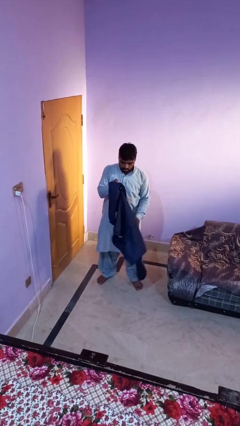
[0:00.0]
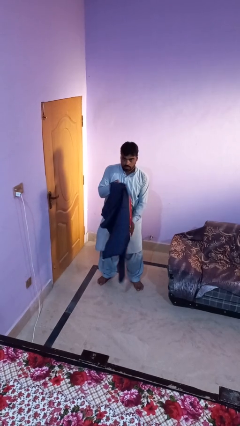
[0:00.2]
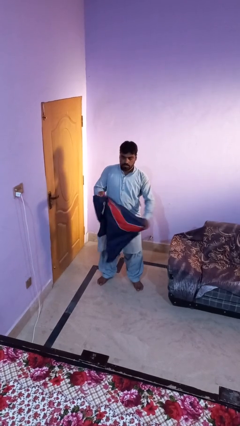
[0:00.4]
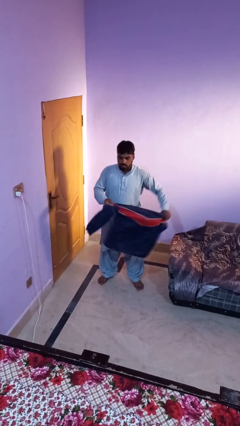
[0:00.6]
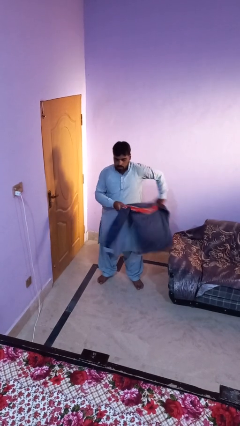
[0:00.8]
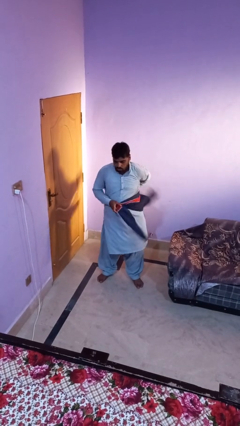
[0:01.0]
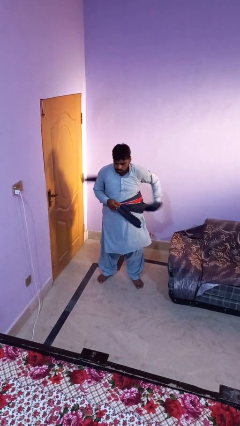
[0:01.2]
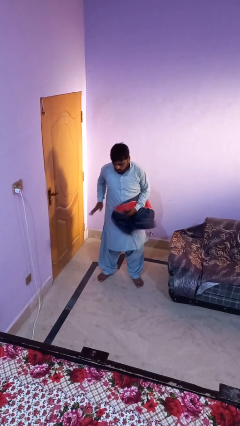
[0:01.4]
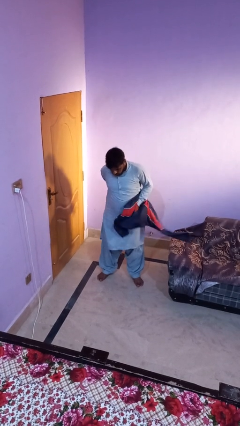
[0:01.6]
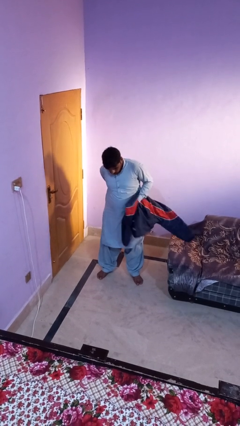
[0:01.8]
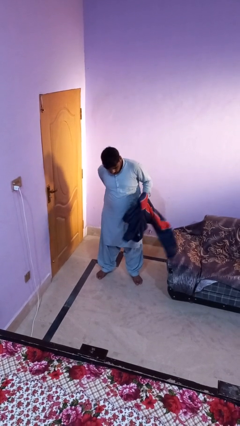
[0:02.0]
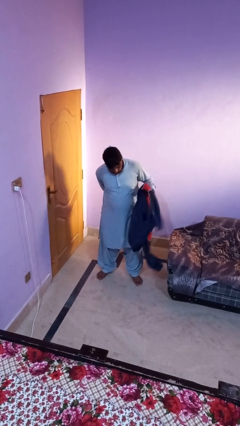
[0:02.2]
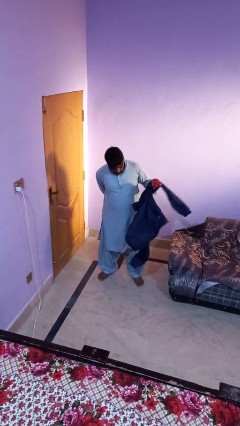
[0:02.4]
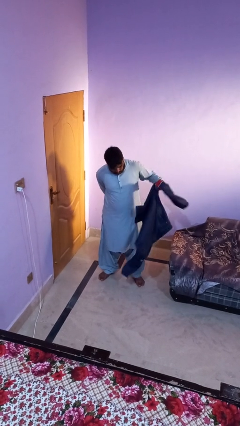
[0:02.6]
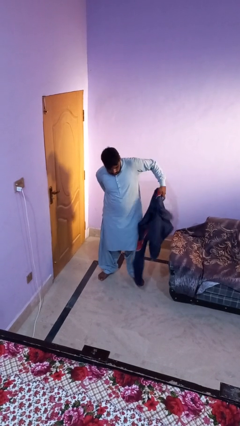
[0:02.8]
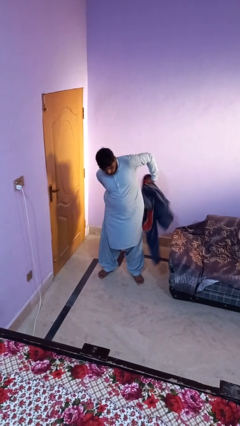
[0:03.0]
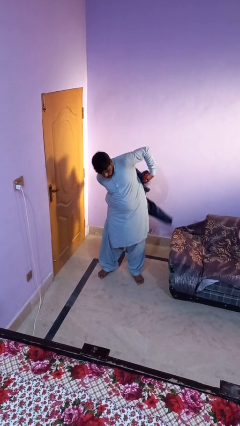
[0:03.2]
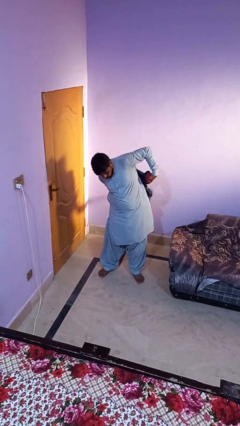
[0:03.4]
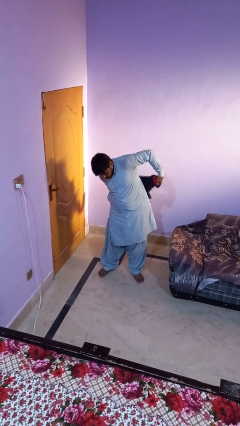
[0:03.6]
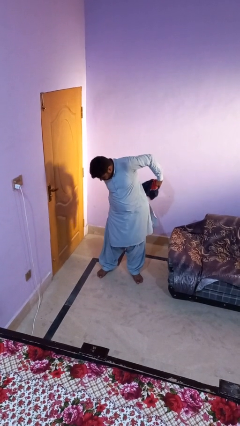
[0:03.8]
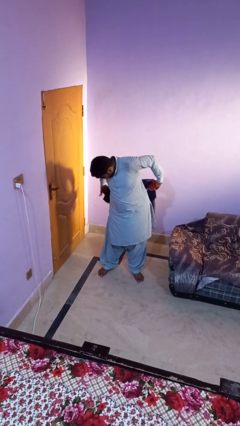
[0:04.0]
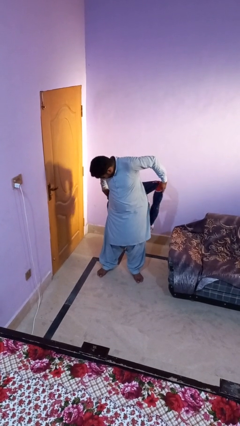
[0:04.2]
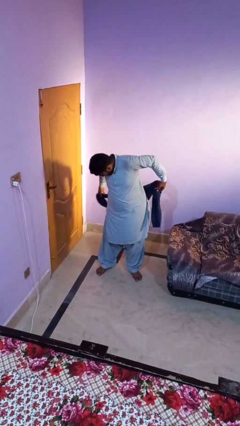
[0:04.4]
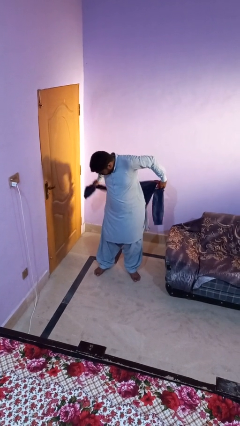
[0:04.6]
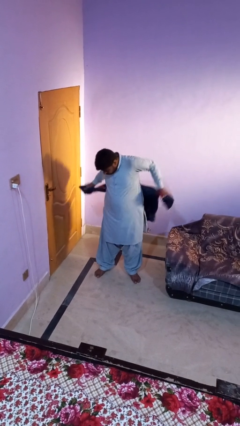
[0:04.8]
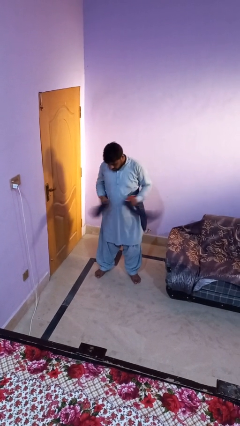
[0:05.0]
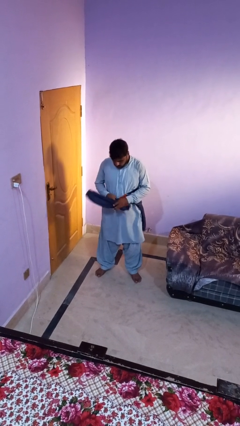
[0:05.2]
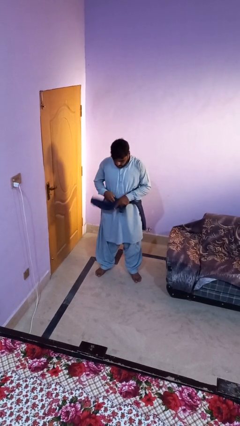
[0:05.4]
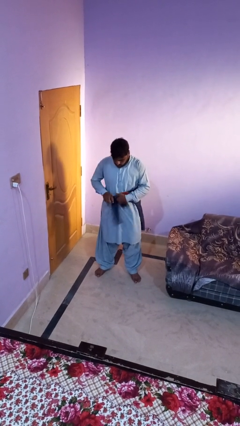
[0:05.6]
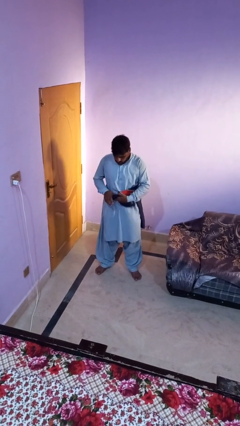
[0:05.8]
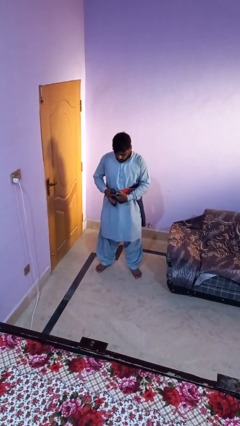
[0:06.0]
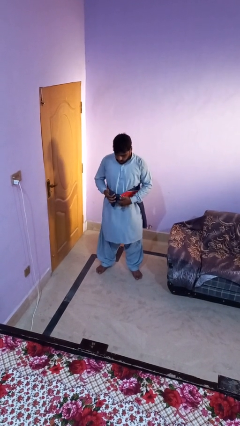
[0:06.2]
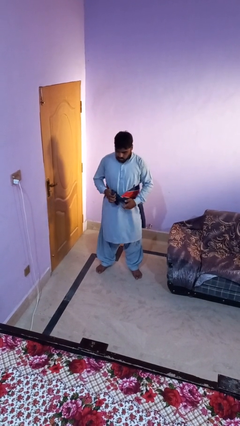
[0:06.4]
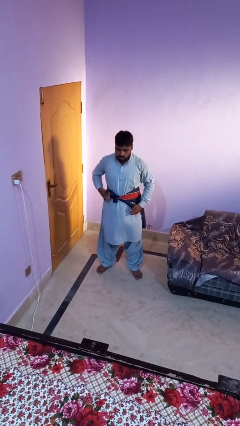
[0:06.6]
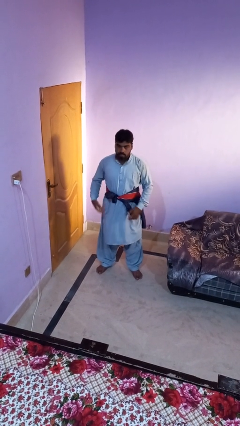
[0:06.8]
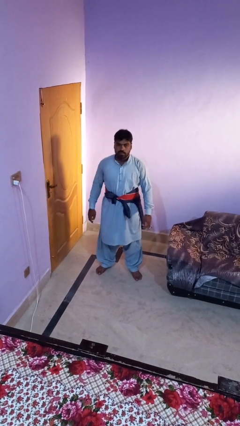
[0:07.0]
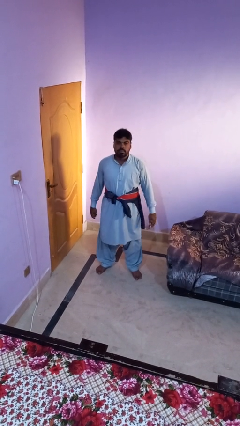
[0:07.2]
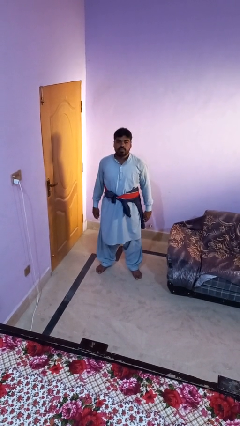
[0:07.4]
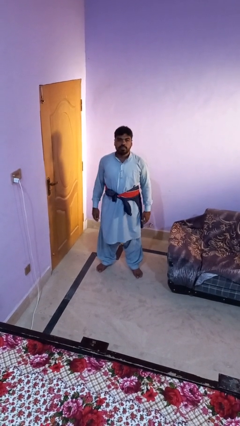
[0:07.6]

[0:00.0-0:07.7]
person ties jacket around waist

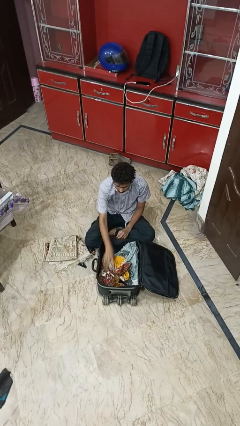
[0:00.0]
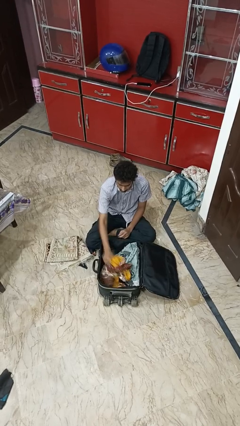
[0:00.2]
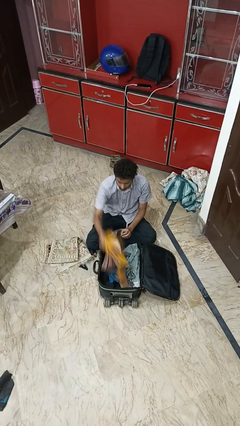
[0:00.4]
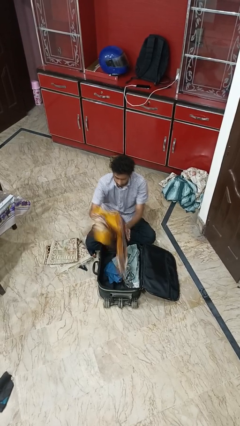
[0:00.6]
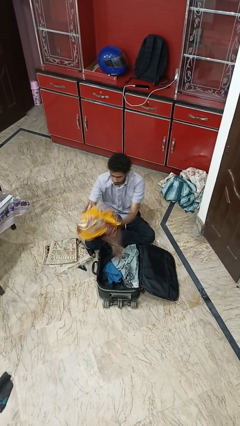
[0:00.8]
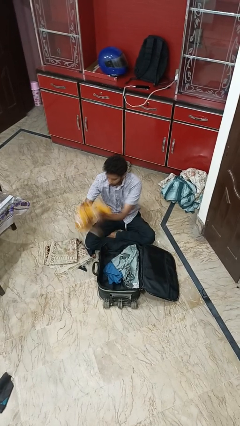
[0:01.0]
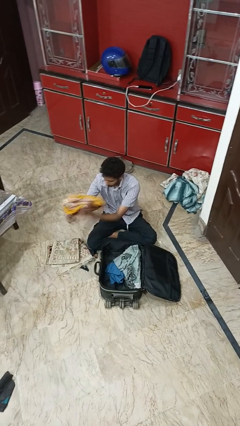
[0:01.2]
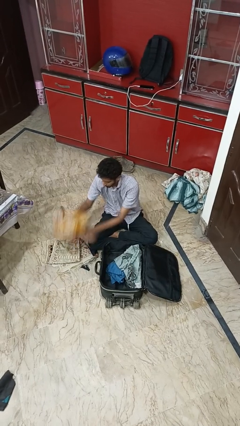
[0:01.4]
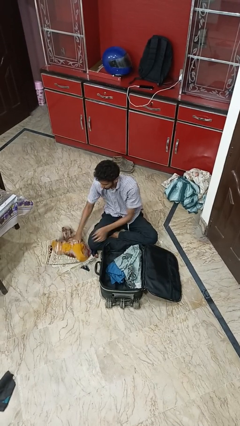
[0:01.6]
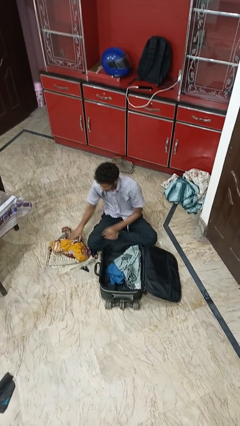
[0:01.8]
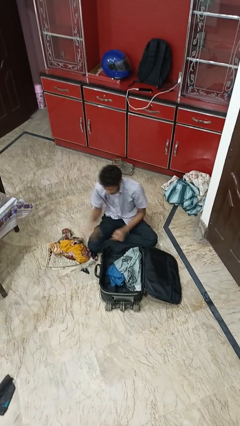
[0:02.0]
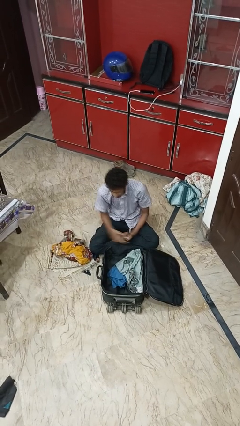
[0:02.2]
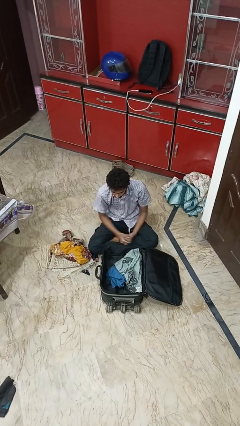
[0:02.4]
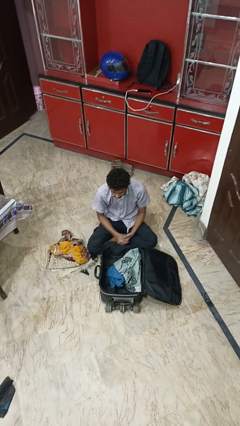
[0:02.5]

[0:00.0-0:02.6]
person unloads clothes from suitcase

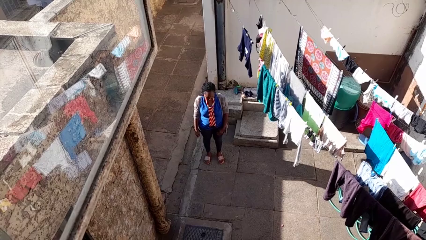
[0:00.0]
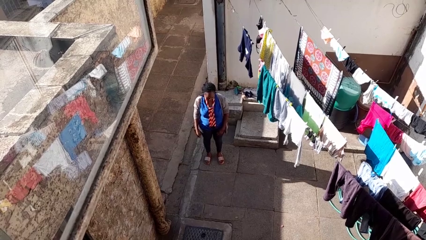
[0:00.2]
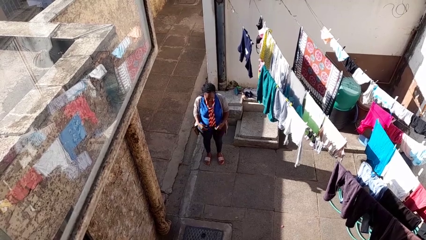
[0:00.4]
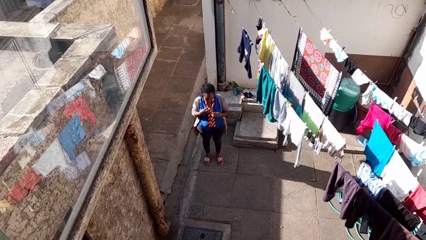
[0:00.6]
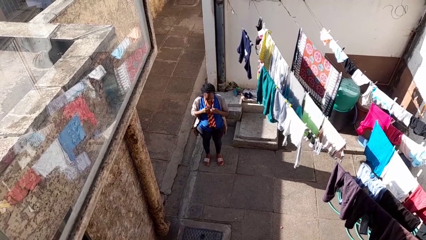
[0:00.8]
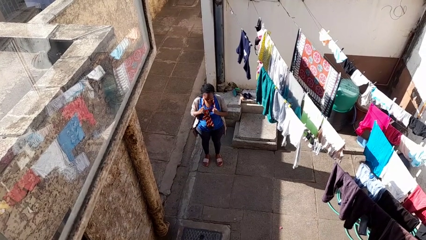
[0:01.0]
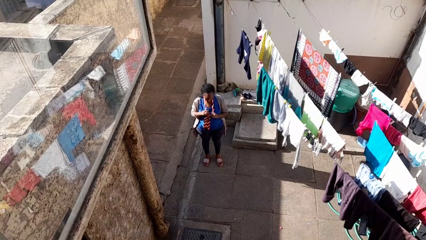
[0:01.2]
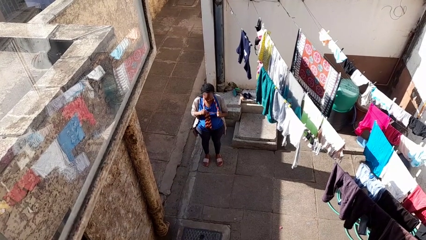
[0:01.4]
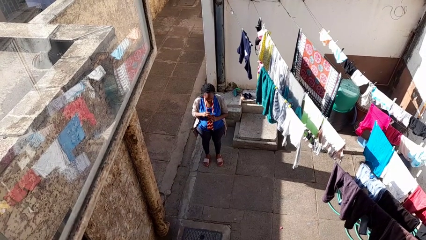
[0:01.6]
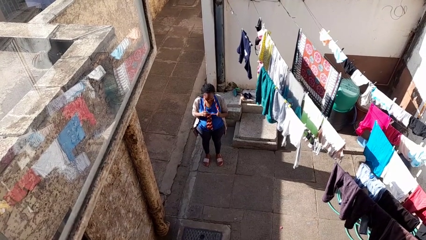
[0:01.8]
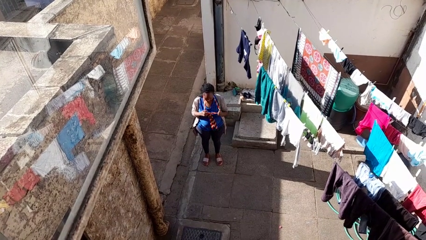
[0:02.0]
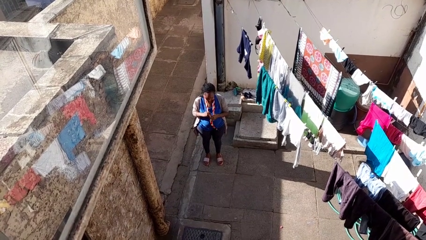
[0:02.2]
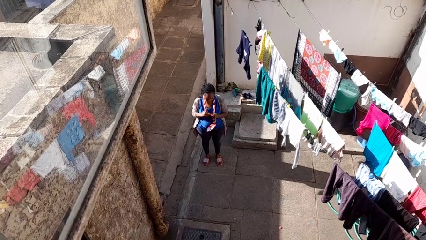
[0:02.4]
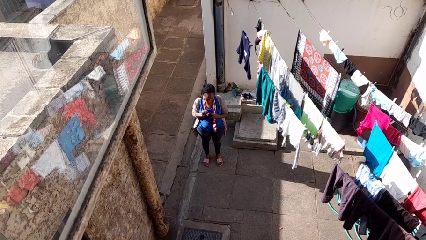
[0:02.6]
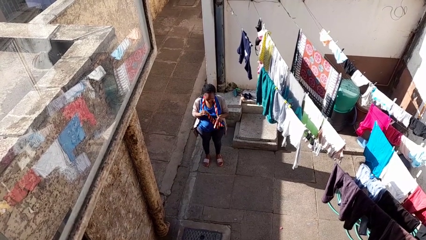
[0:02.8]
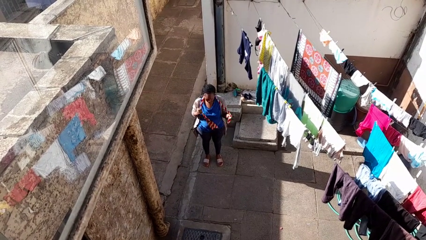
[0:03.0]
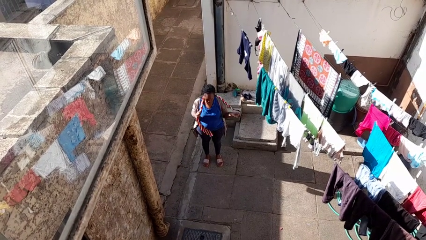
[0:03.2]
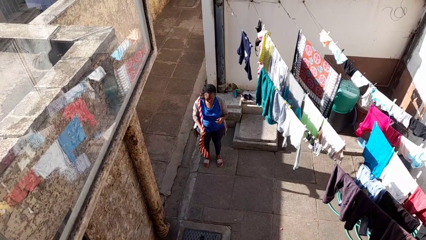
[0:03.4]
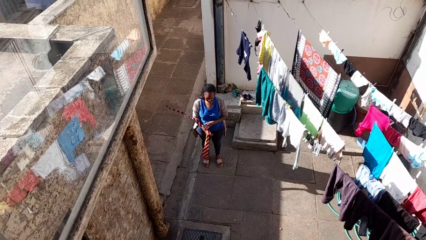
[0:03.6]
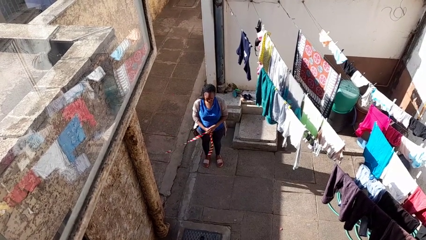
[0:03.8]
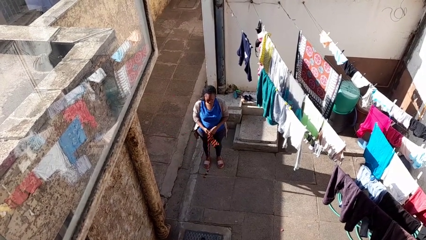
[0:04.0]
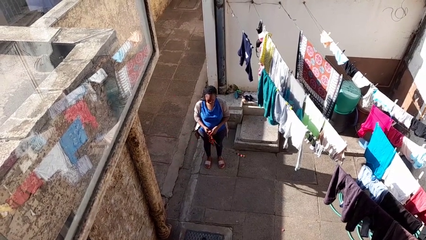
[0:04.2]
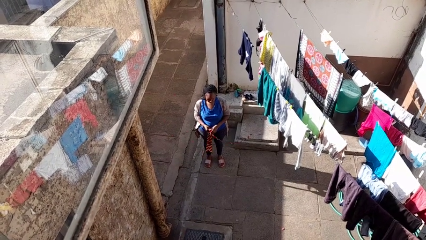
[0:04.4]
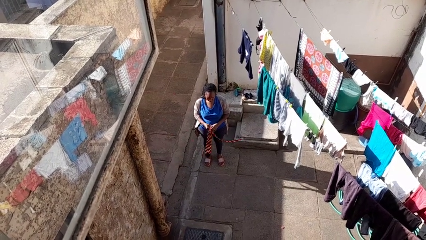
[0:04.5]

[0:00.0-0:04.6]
person takes off necktie

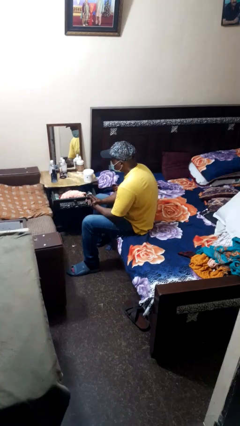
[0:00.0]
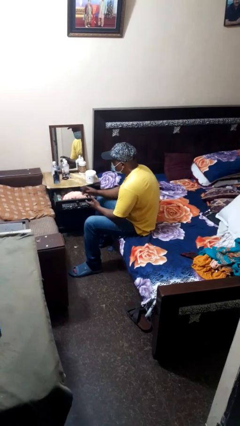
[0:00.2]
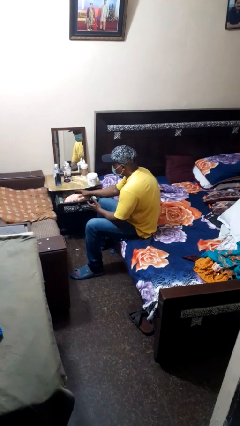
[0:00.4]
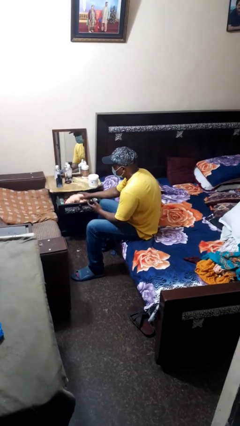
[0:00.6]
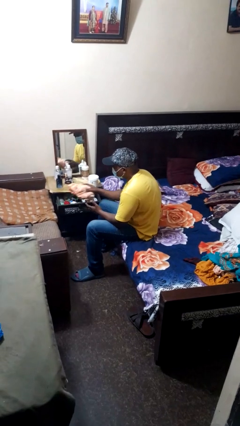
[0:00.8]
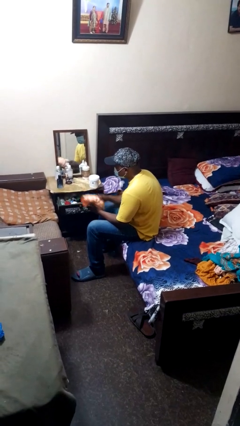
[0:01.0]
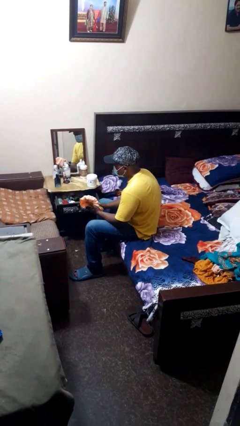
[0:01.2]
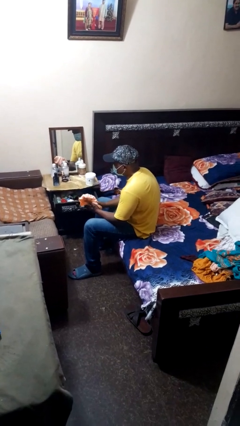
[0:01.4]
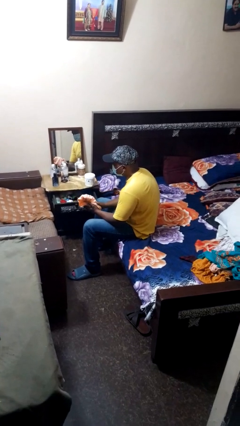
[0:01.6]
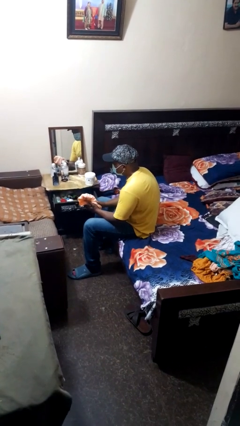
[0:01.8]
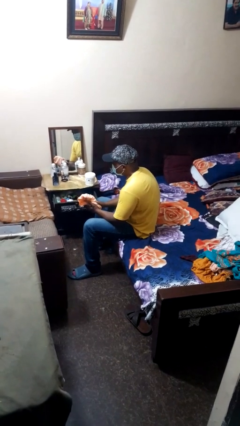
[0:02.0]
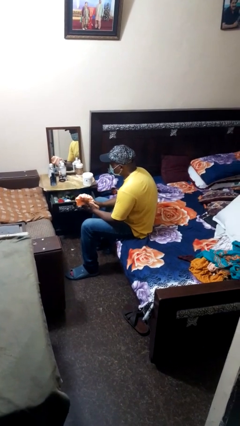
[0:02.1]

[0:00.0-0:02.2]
person takes clothes from dresser

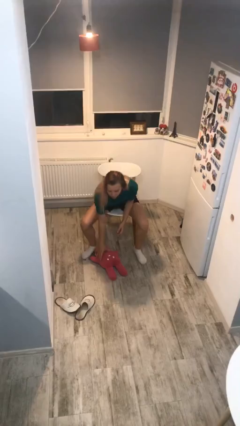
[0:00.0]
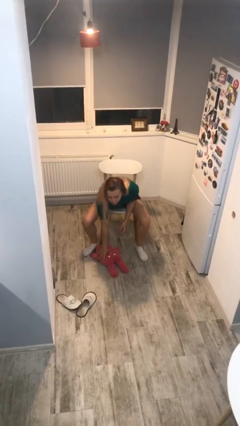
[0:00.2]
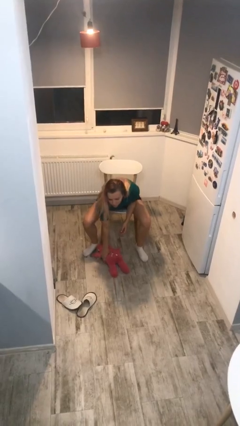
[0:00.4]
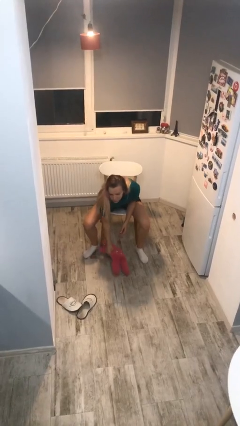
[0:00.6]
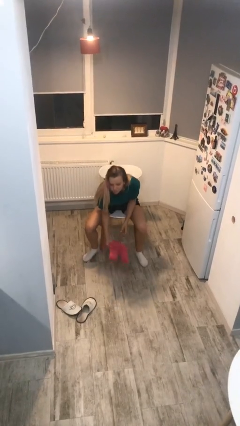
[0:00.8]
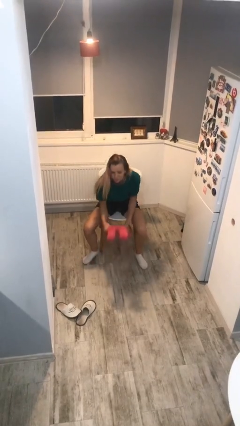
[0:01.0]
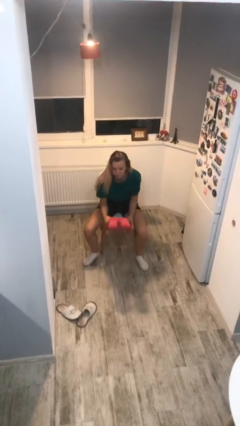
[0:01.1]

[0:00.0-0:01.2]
person picks up object from floor
